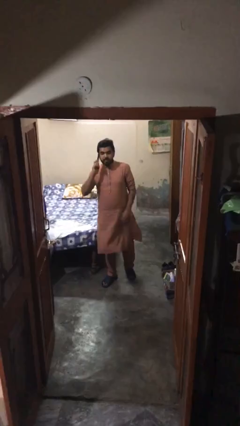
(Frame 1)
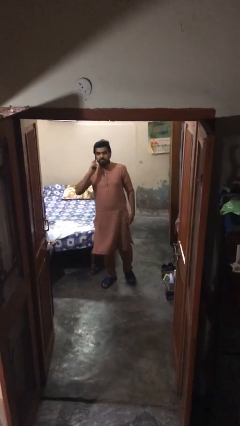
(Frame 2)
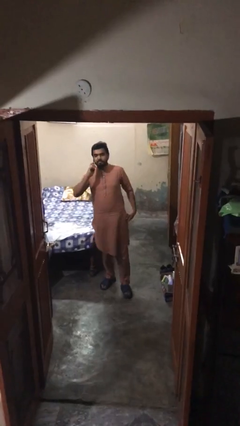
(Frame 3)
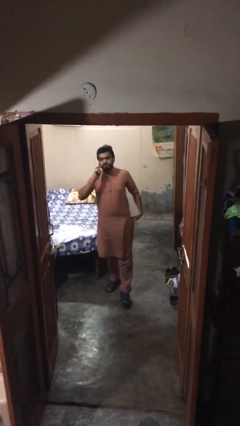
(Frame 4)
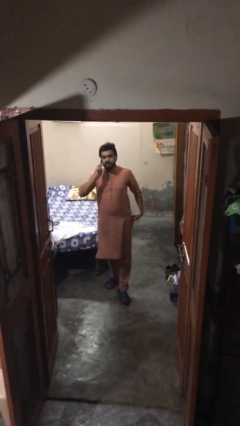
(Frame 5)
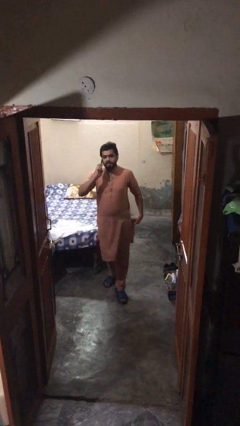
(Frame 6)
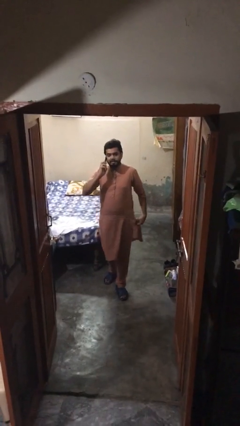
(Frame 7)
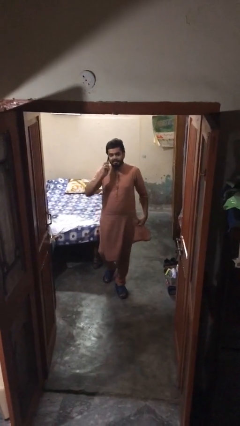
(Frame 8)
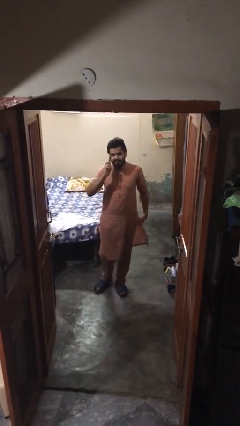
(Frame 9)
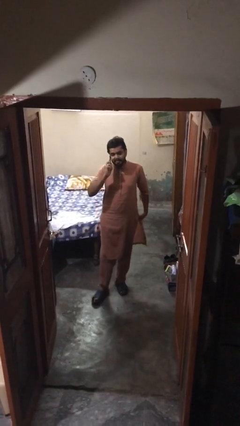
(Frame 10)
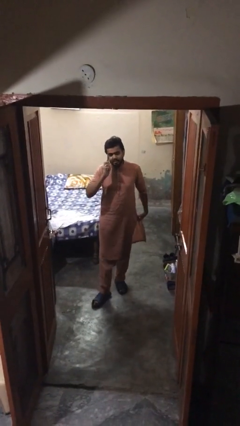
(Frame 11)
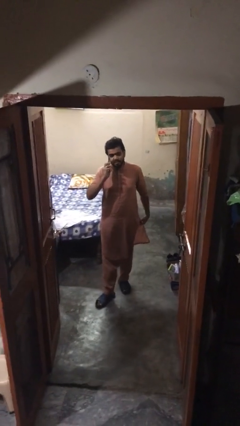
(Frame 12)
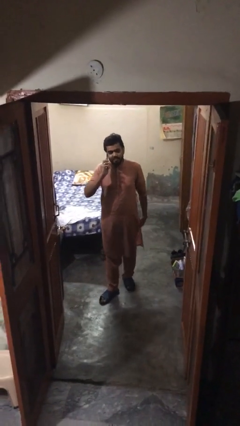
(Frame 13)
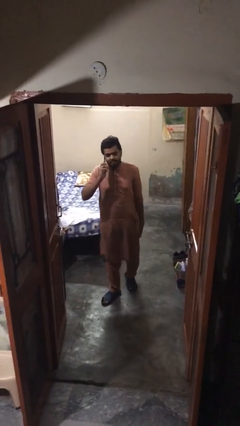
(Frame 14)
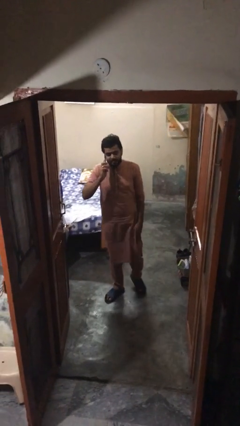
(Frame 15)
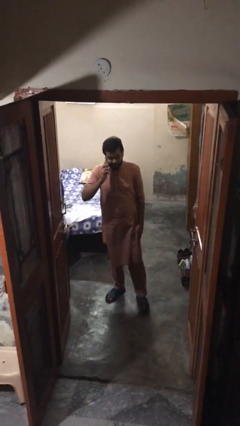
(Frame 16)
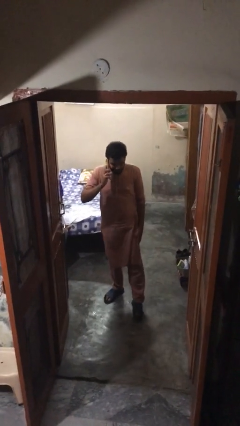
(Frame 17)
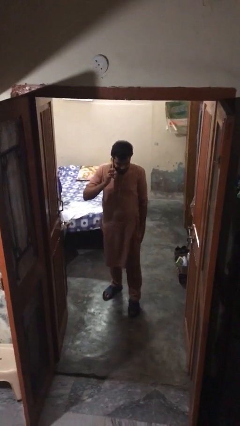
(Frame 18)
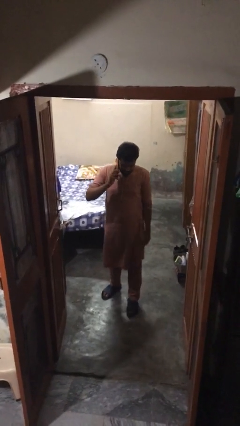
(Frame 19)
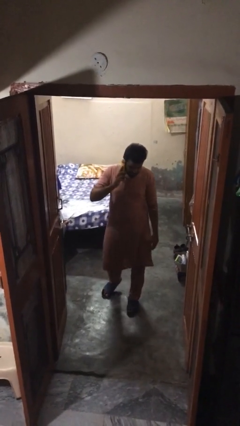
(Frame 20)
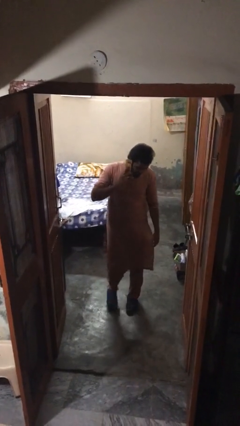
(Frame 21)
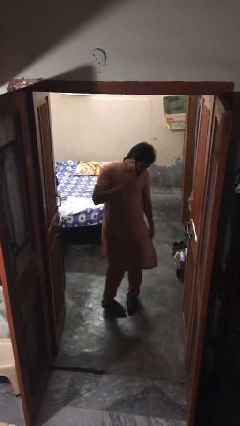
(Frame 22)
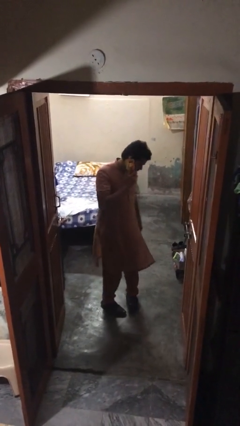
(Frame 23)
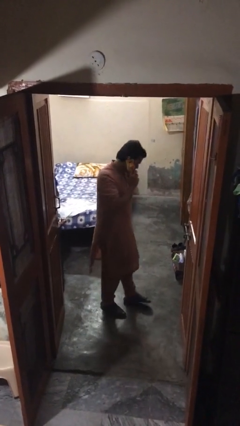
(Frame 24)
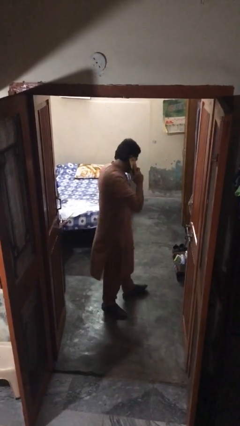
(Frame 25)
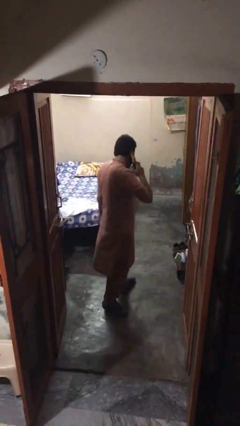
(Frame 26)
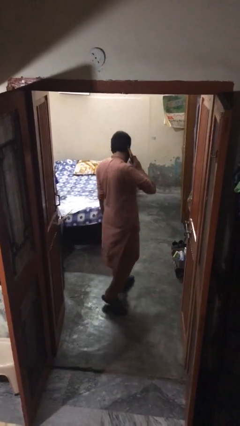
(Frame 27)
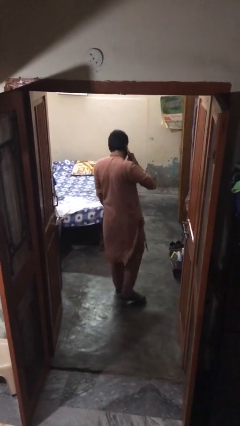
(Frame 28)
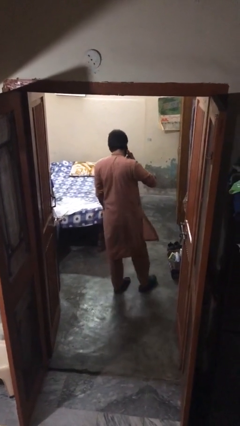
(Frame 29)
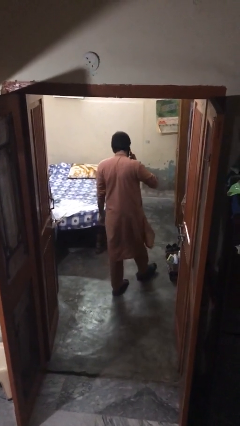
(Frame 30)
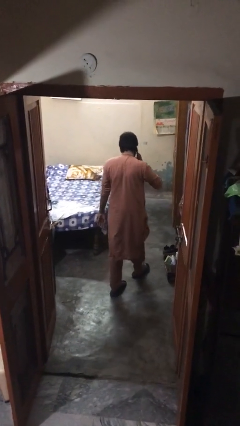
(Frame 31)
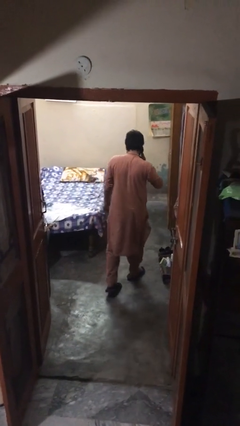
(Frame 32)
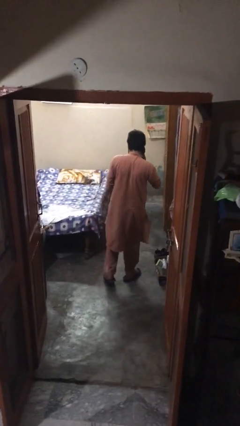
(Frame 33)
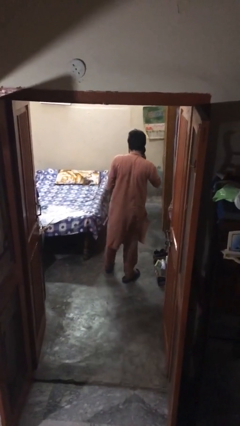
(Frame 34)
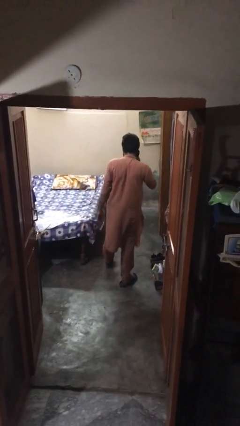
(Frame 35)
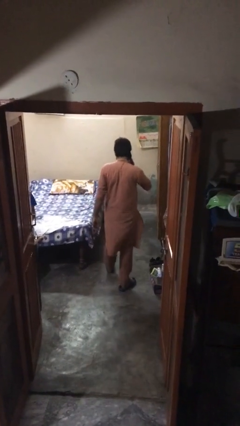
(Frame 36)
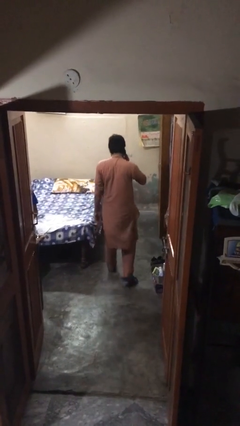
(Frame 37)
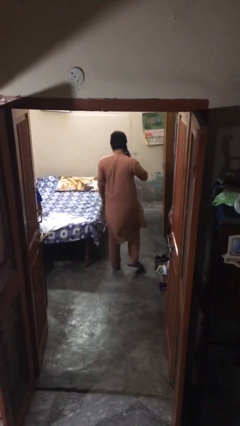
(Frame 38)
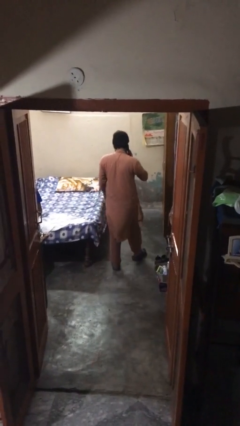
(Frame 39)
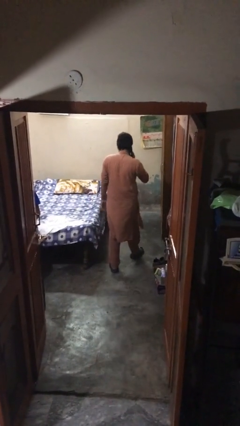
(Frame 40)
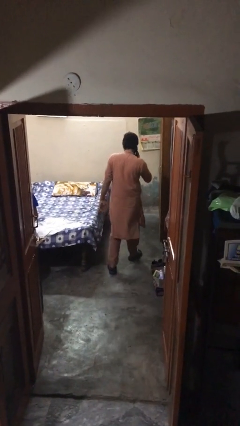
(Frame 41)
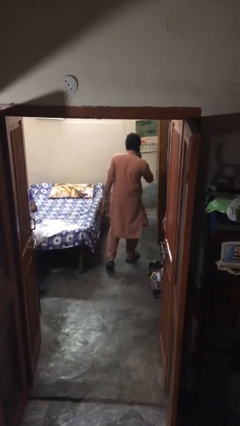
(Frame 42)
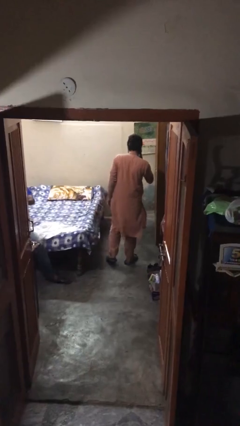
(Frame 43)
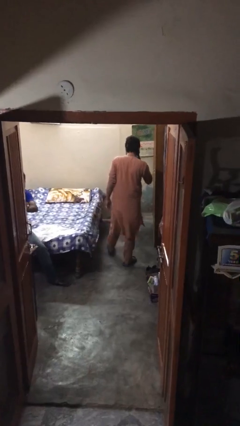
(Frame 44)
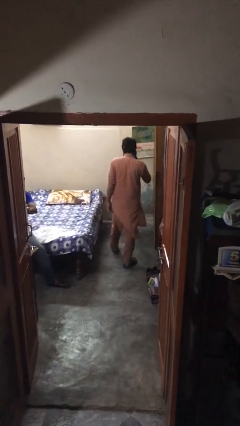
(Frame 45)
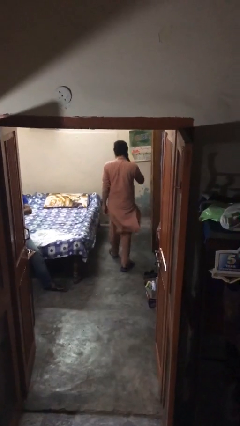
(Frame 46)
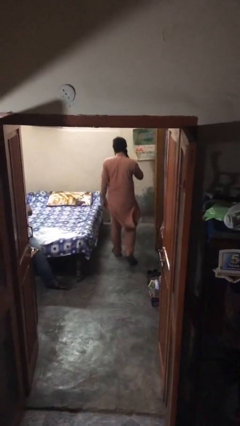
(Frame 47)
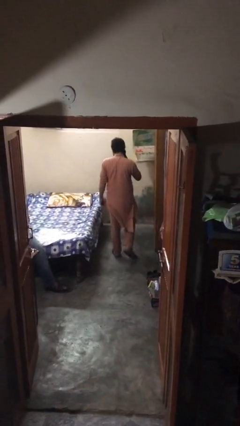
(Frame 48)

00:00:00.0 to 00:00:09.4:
person talks on phone

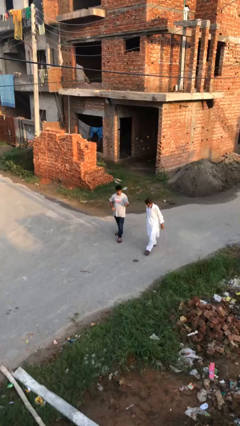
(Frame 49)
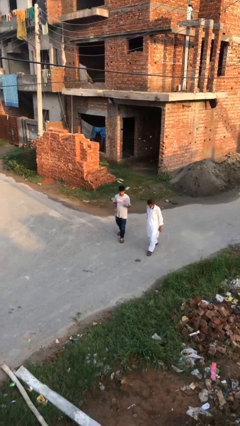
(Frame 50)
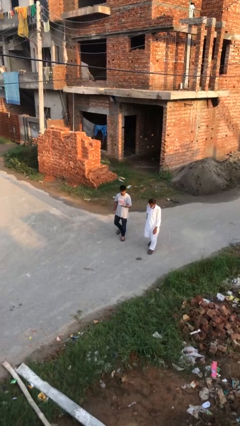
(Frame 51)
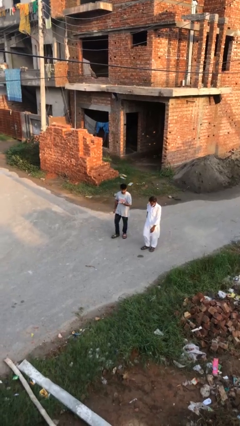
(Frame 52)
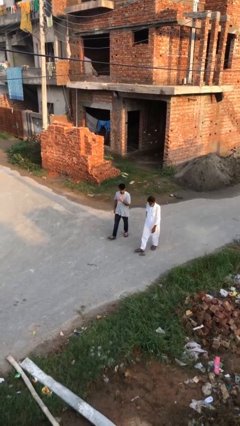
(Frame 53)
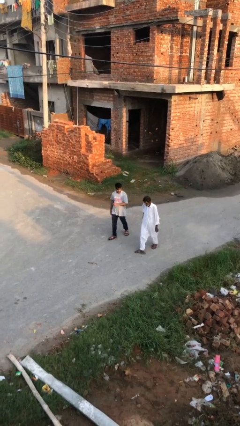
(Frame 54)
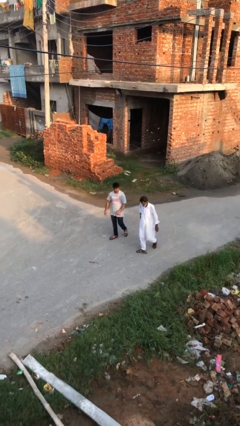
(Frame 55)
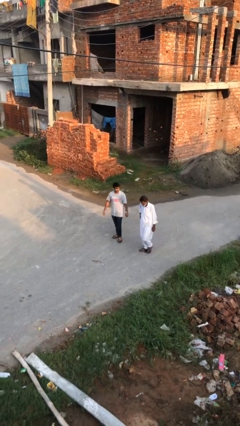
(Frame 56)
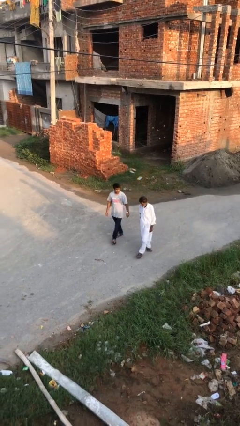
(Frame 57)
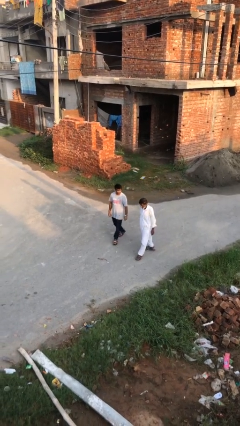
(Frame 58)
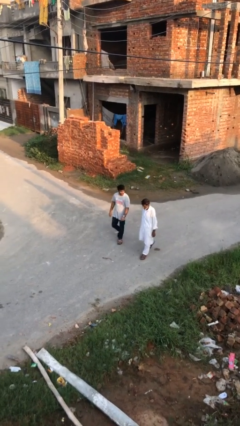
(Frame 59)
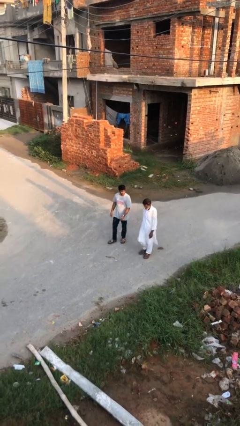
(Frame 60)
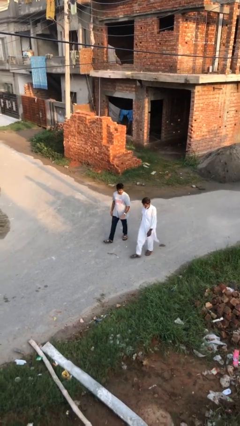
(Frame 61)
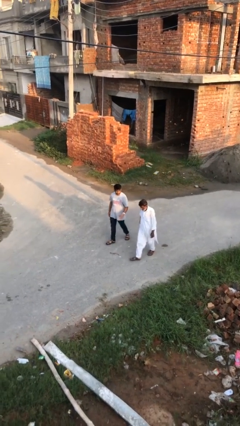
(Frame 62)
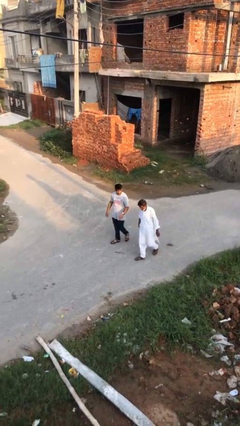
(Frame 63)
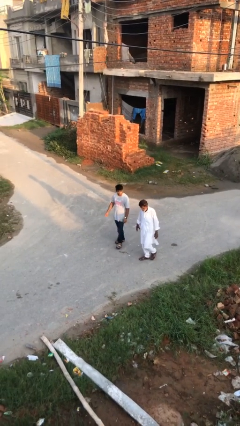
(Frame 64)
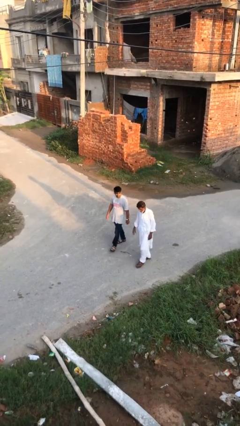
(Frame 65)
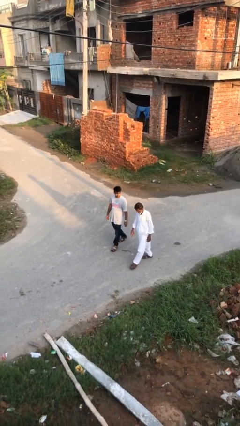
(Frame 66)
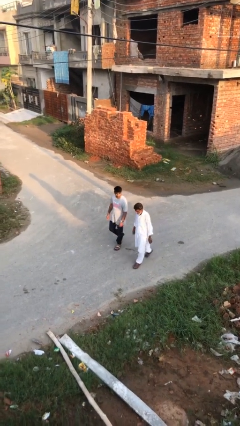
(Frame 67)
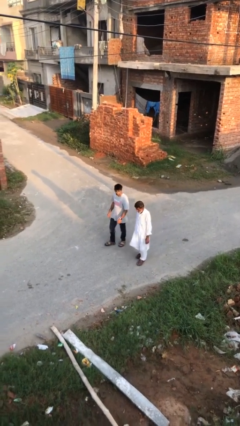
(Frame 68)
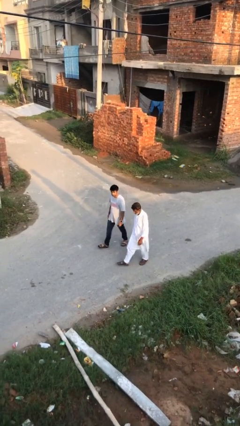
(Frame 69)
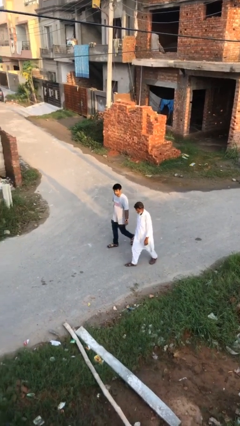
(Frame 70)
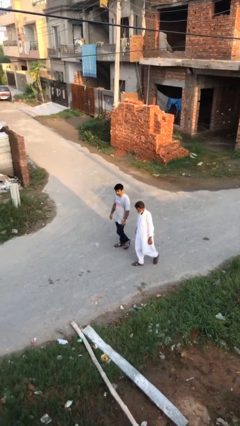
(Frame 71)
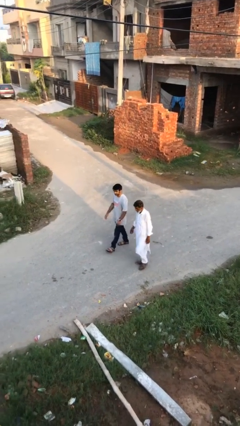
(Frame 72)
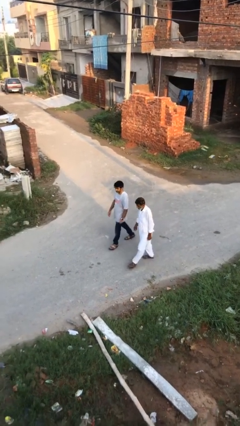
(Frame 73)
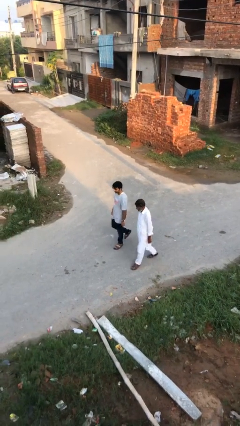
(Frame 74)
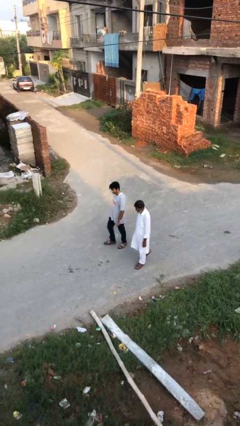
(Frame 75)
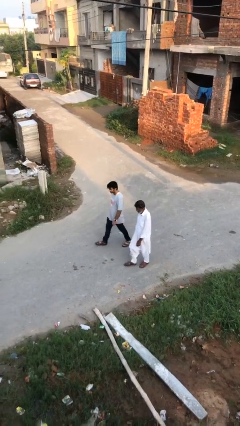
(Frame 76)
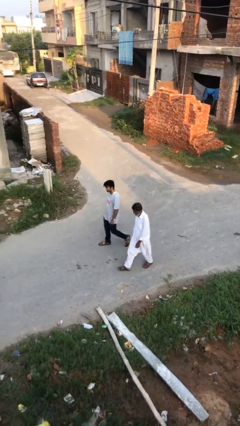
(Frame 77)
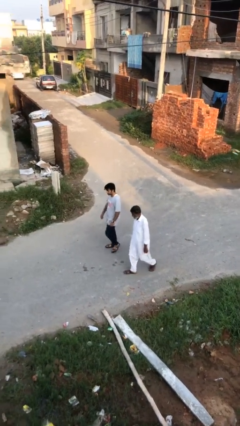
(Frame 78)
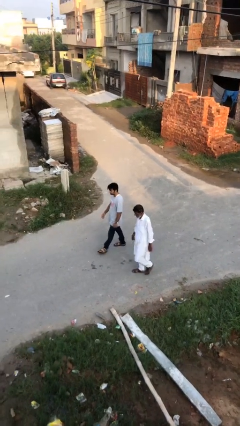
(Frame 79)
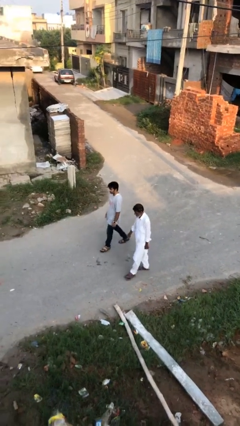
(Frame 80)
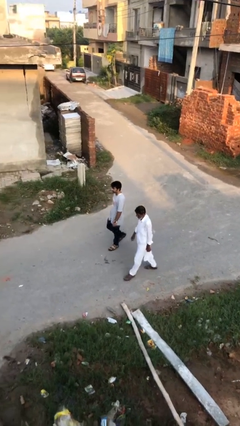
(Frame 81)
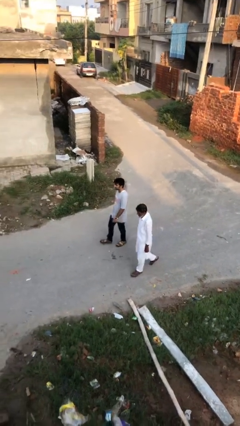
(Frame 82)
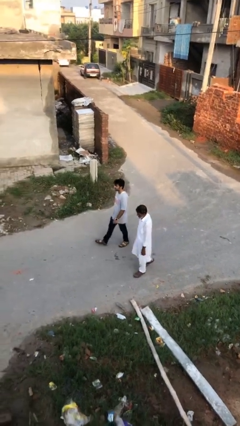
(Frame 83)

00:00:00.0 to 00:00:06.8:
person talks to person

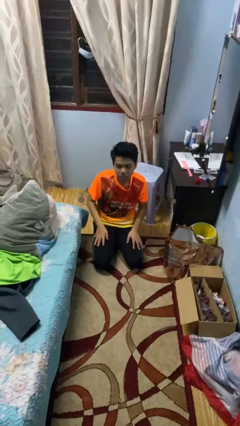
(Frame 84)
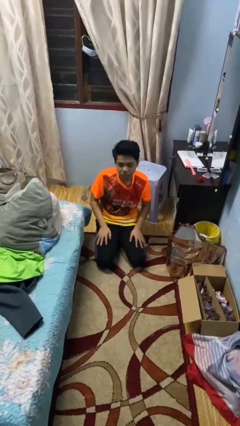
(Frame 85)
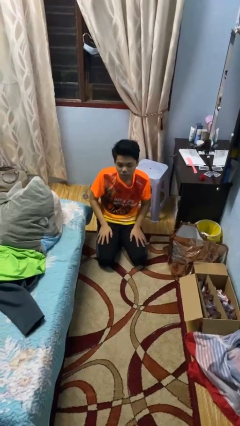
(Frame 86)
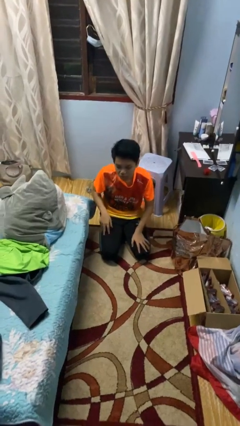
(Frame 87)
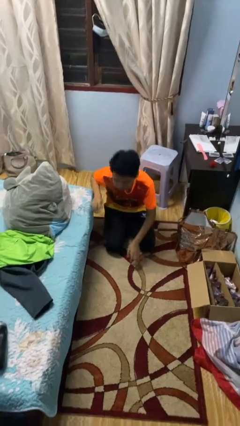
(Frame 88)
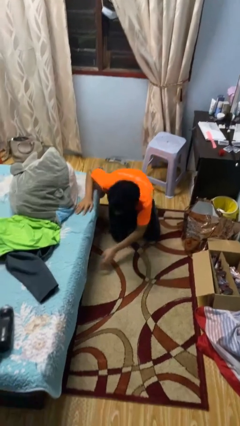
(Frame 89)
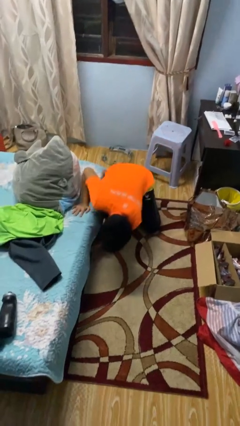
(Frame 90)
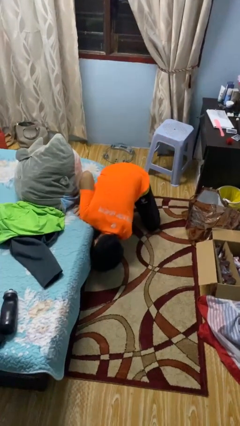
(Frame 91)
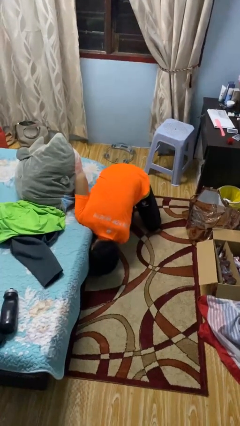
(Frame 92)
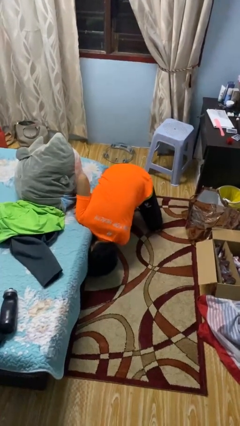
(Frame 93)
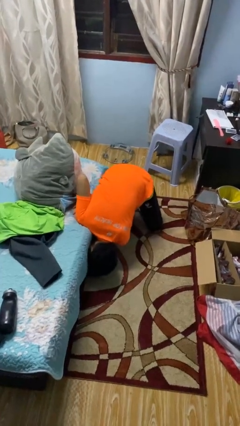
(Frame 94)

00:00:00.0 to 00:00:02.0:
person searches under bed
